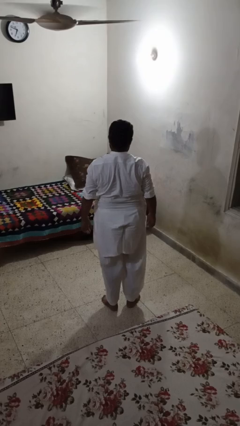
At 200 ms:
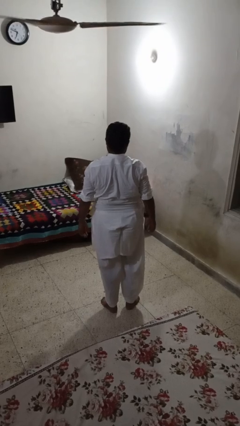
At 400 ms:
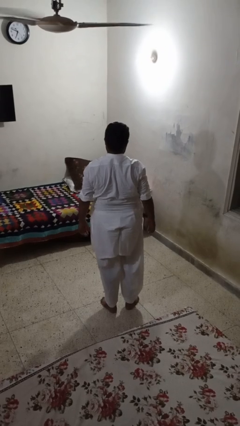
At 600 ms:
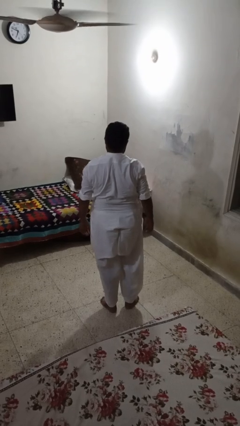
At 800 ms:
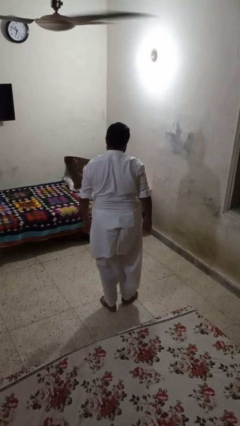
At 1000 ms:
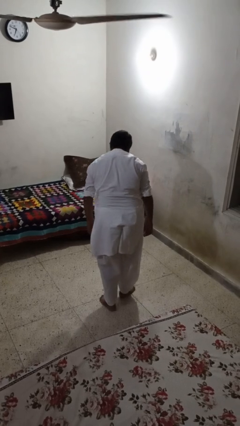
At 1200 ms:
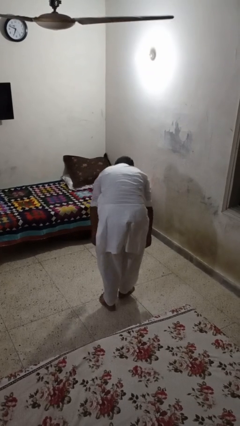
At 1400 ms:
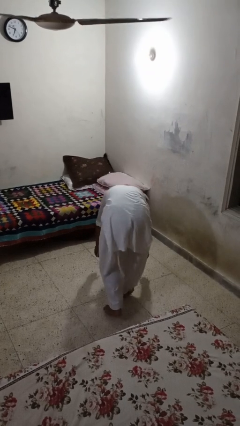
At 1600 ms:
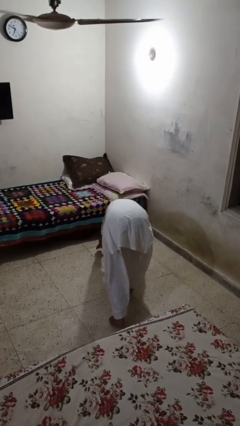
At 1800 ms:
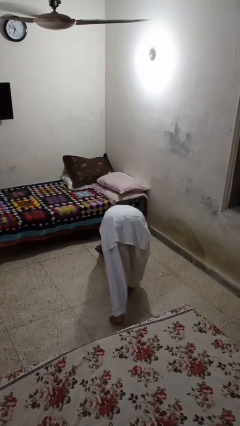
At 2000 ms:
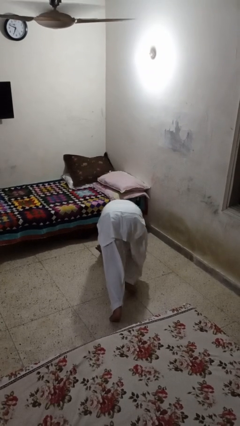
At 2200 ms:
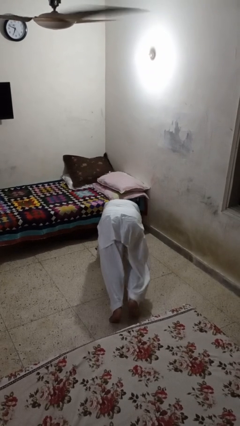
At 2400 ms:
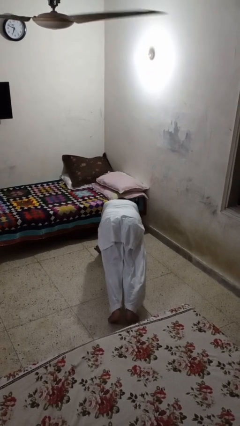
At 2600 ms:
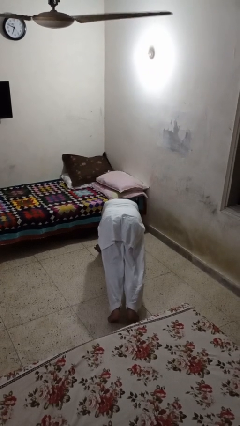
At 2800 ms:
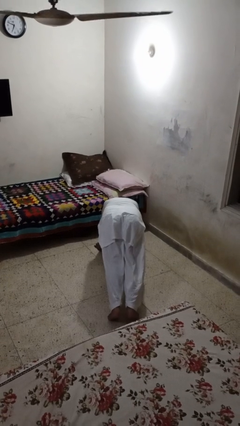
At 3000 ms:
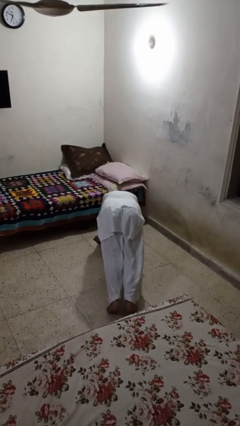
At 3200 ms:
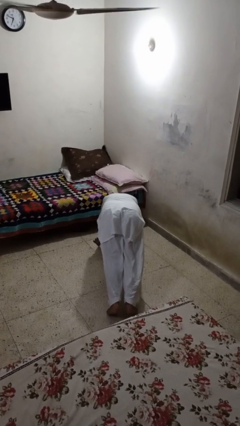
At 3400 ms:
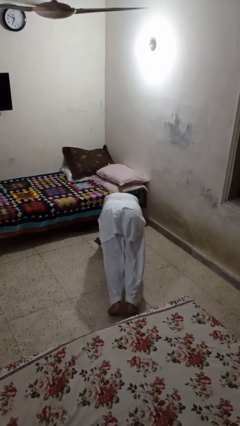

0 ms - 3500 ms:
person exercises with plank

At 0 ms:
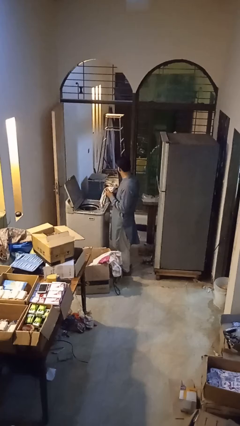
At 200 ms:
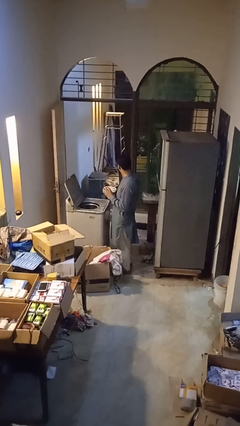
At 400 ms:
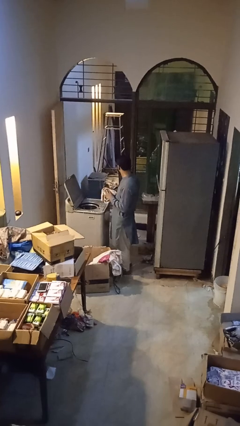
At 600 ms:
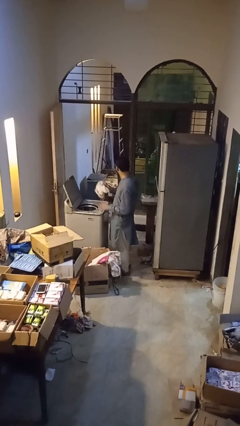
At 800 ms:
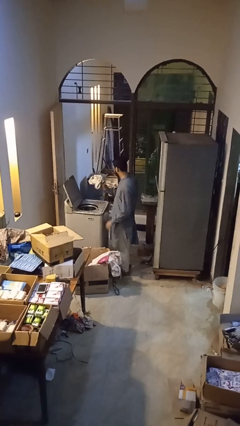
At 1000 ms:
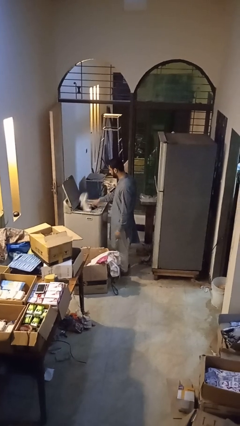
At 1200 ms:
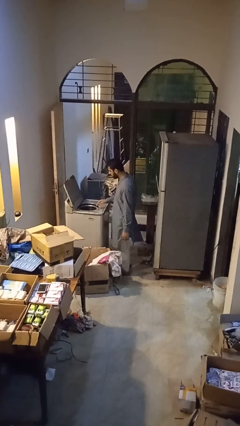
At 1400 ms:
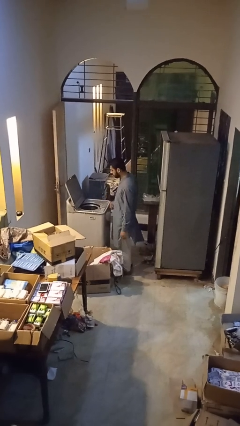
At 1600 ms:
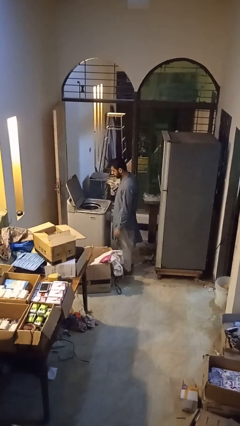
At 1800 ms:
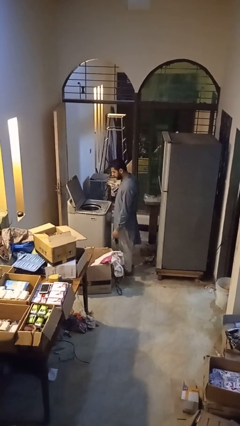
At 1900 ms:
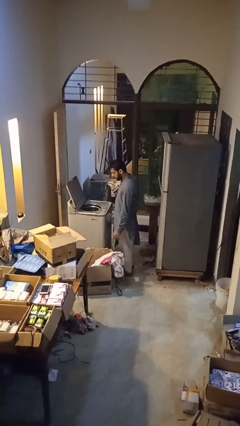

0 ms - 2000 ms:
person loads clotheswasher

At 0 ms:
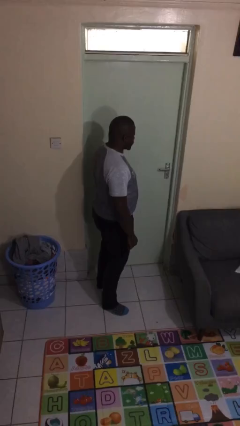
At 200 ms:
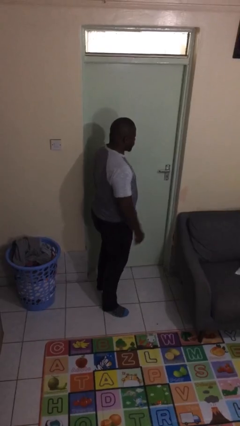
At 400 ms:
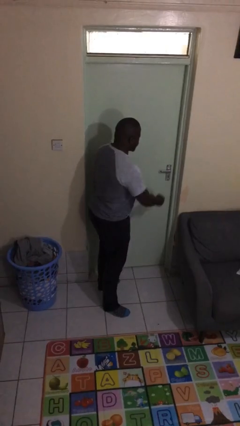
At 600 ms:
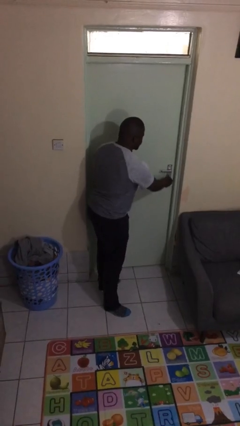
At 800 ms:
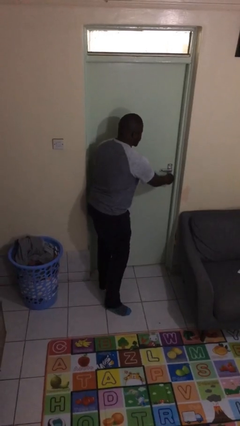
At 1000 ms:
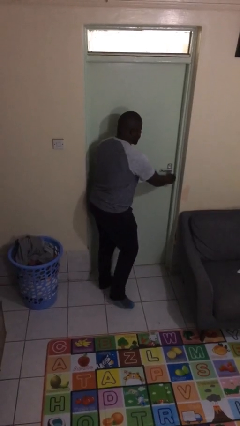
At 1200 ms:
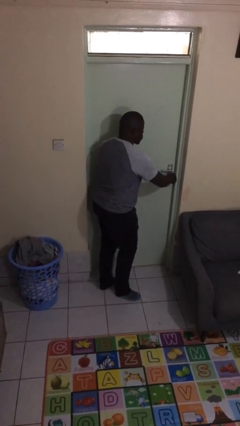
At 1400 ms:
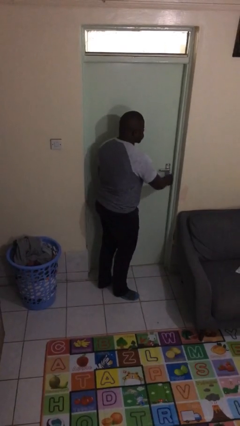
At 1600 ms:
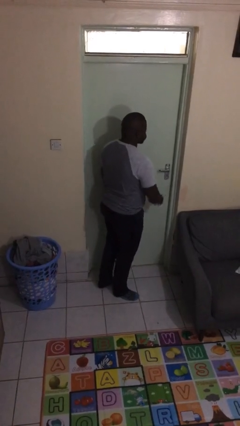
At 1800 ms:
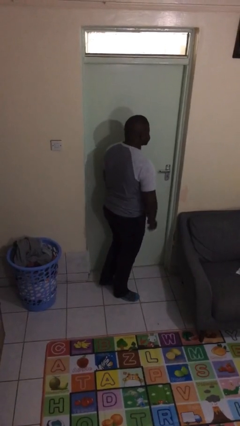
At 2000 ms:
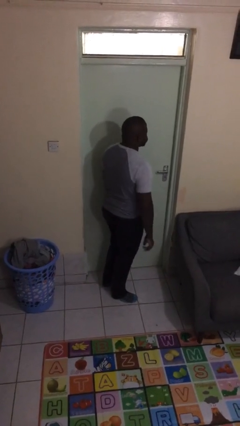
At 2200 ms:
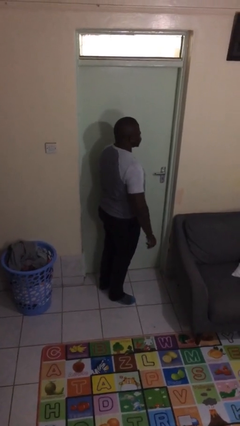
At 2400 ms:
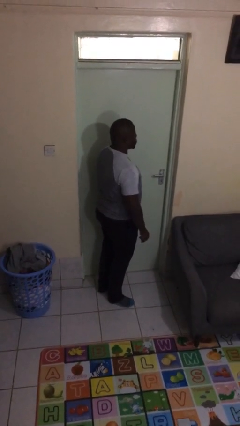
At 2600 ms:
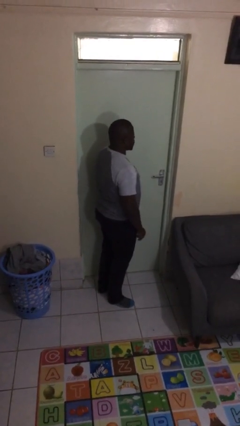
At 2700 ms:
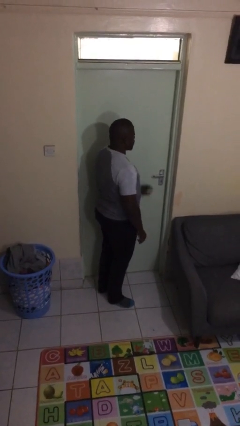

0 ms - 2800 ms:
person unlocks door with keys

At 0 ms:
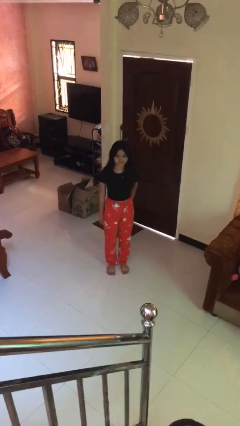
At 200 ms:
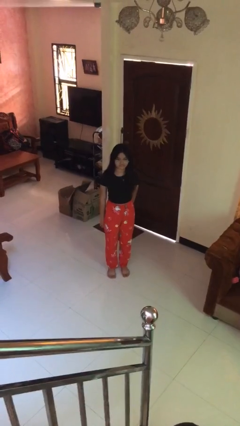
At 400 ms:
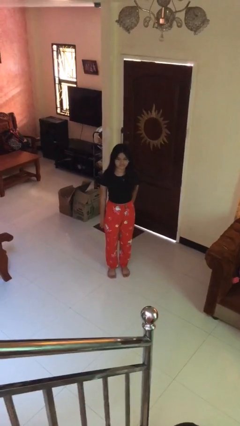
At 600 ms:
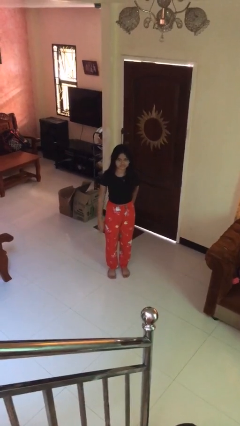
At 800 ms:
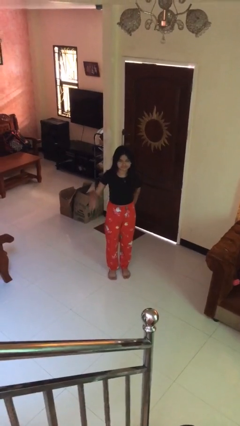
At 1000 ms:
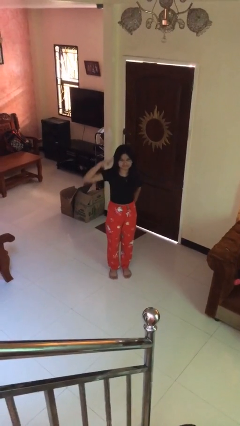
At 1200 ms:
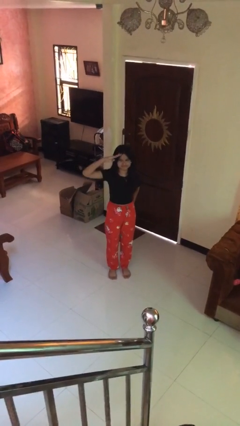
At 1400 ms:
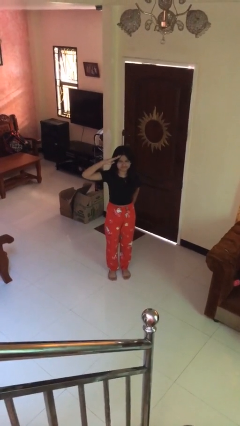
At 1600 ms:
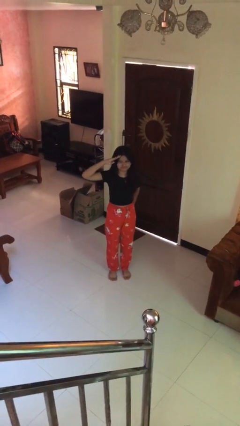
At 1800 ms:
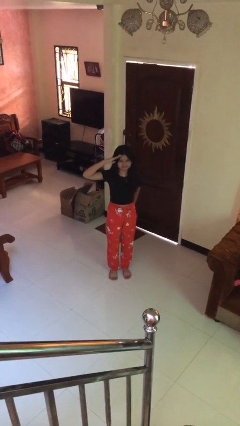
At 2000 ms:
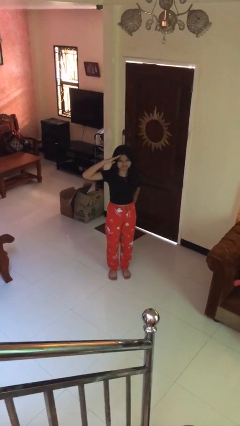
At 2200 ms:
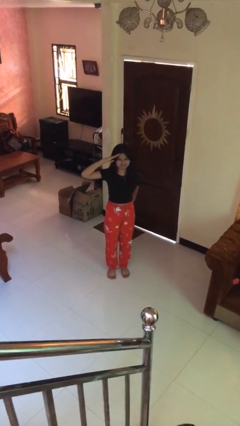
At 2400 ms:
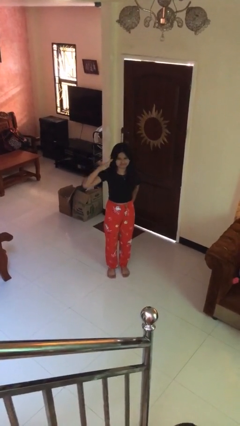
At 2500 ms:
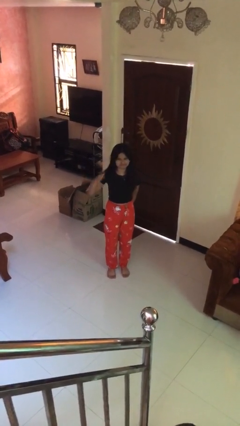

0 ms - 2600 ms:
person salutes

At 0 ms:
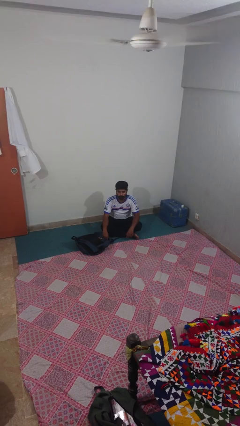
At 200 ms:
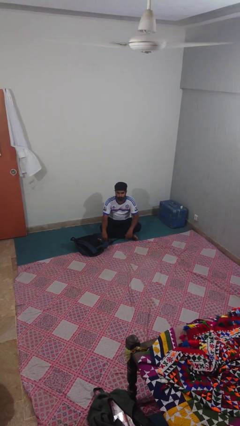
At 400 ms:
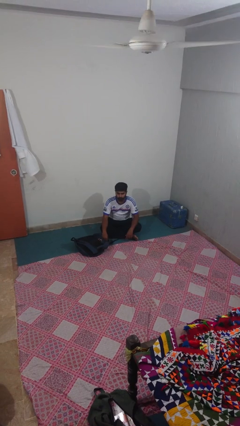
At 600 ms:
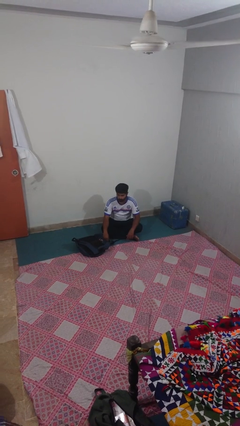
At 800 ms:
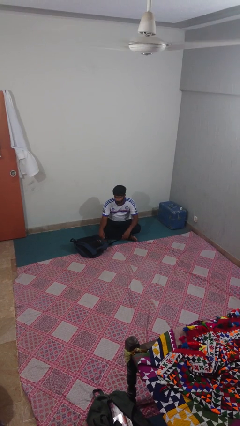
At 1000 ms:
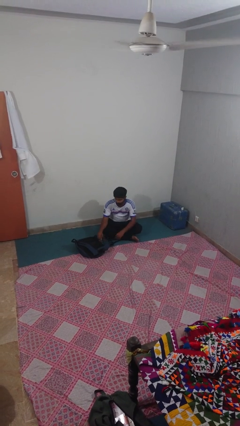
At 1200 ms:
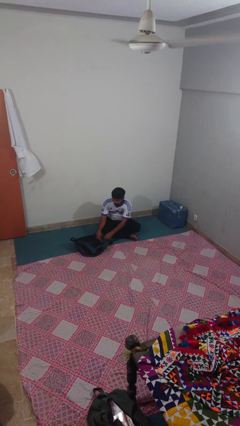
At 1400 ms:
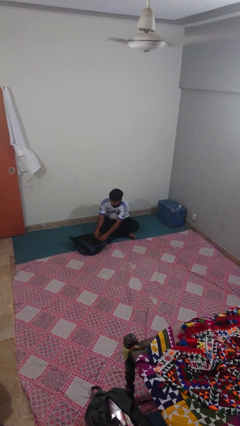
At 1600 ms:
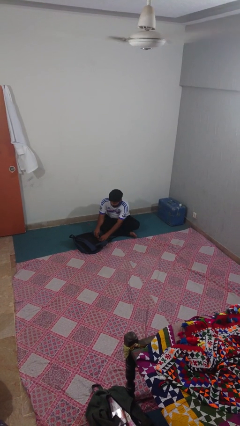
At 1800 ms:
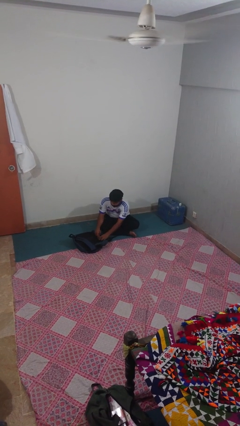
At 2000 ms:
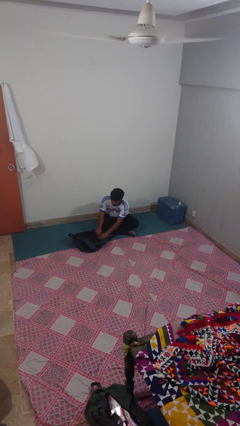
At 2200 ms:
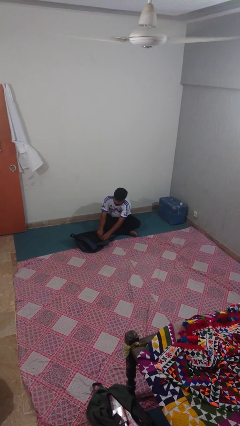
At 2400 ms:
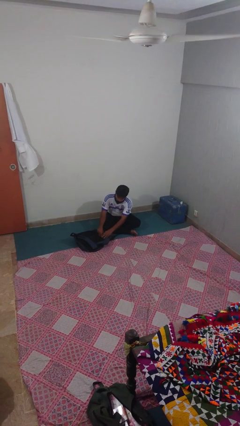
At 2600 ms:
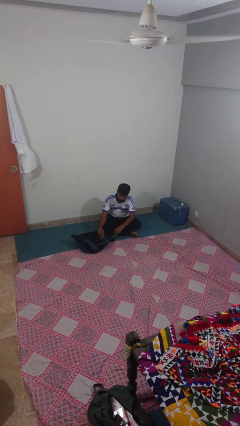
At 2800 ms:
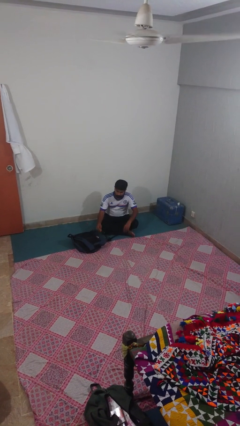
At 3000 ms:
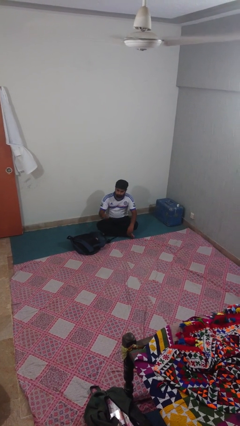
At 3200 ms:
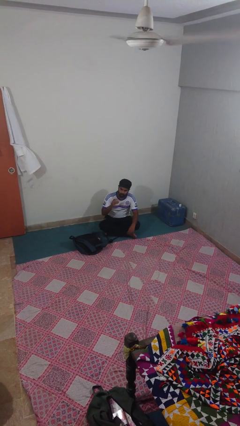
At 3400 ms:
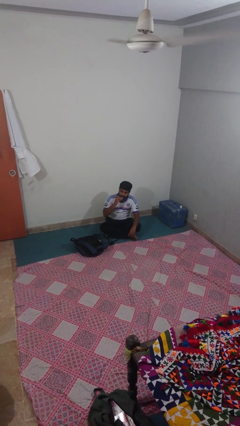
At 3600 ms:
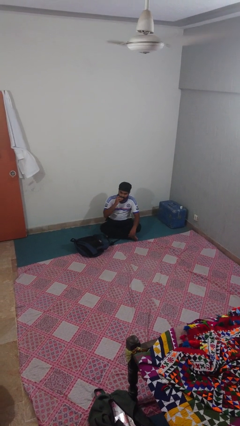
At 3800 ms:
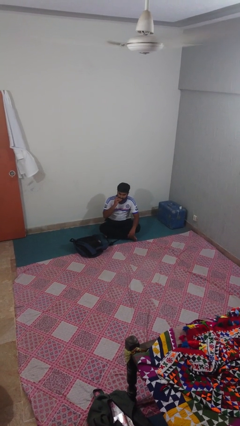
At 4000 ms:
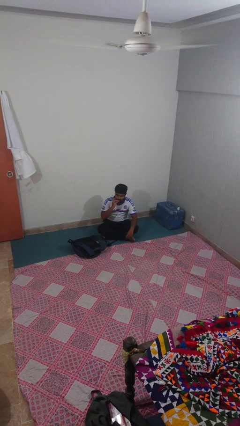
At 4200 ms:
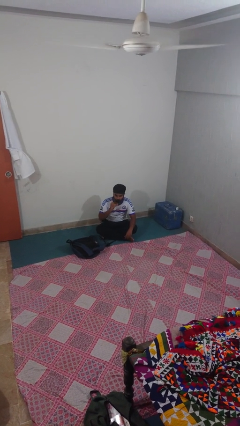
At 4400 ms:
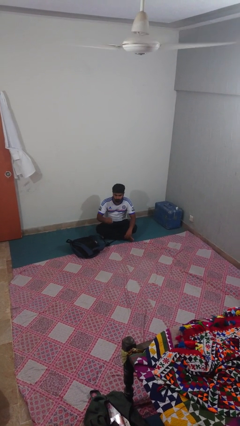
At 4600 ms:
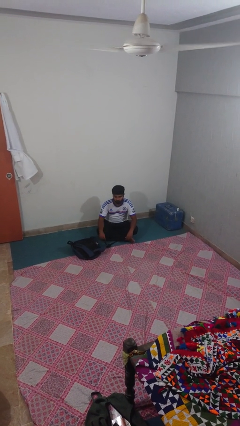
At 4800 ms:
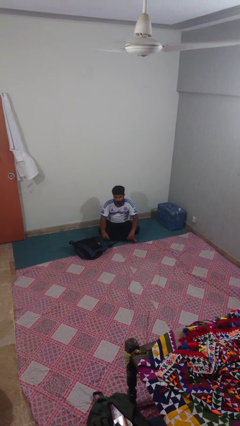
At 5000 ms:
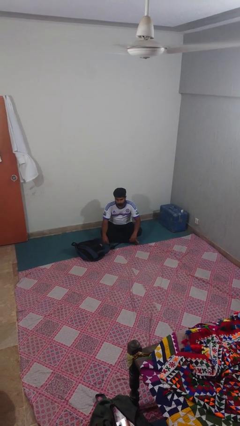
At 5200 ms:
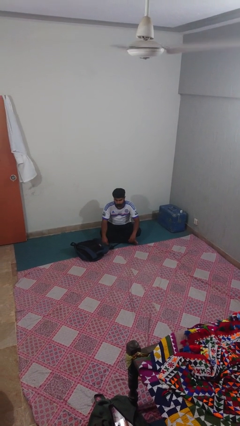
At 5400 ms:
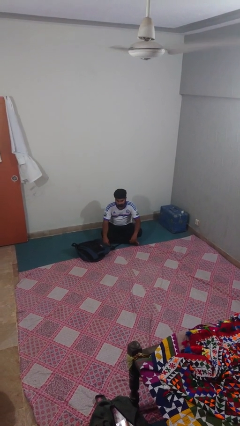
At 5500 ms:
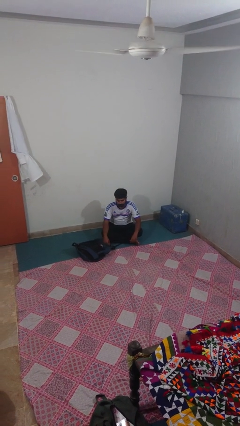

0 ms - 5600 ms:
person eats snack from bag

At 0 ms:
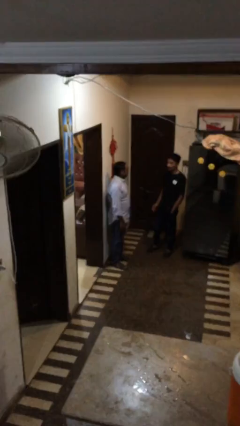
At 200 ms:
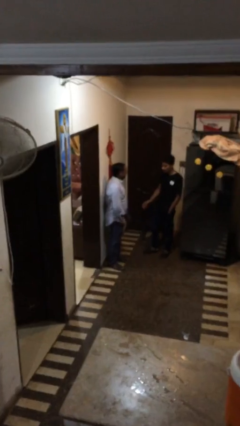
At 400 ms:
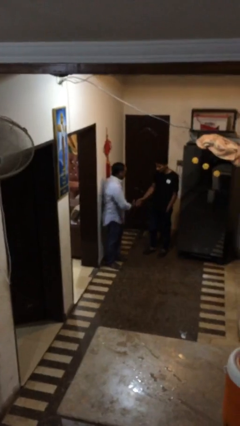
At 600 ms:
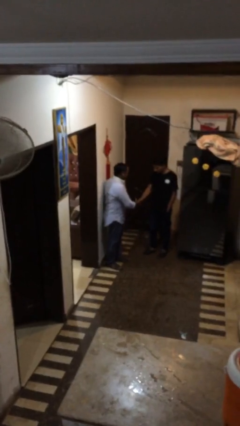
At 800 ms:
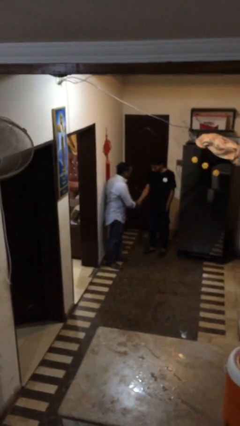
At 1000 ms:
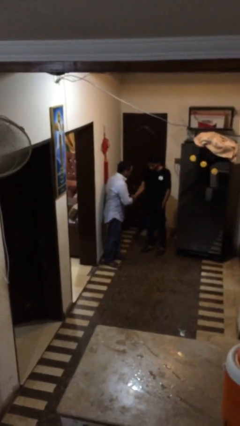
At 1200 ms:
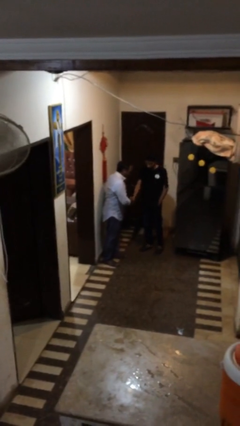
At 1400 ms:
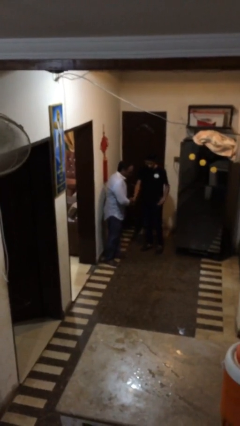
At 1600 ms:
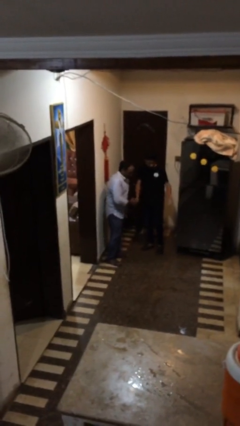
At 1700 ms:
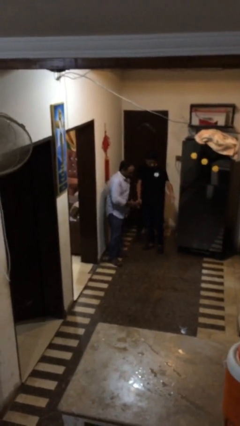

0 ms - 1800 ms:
person shakes hand
